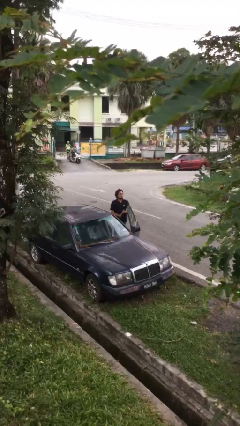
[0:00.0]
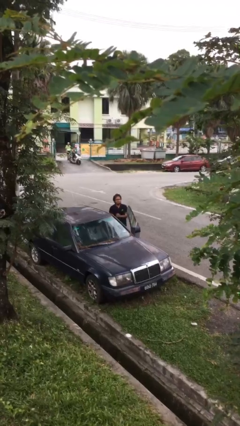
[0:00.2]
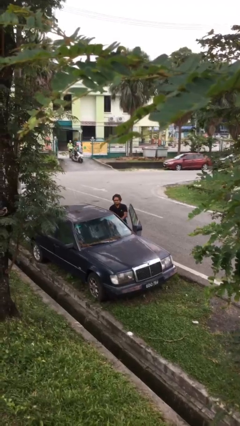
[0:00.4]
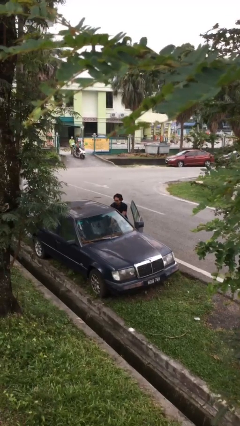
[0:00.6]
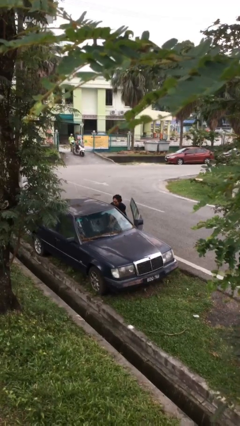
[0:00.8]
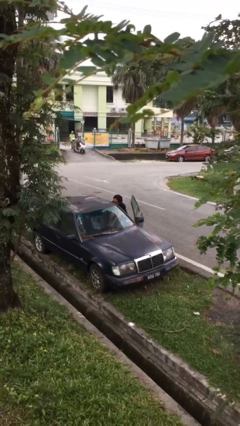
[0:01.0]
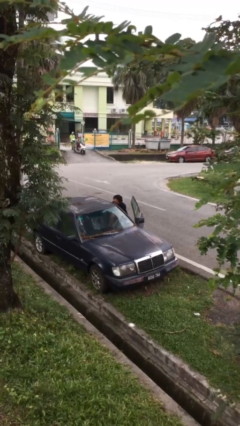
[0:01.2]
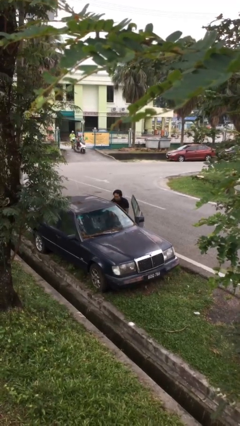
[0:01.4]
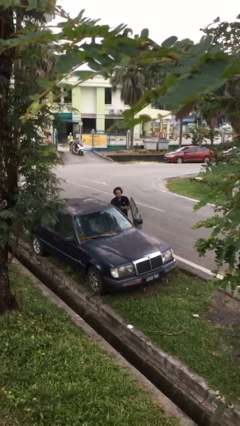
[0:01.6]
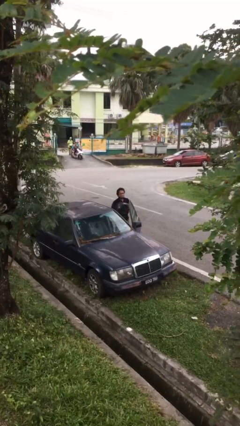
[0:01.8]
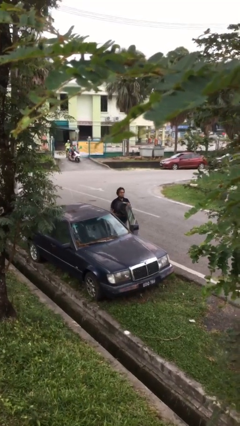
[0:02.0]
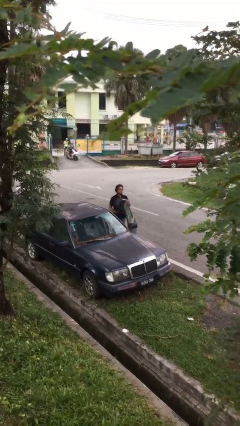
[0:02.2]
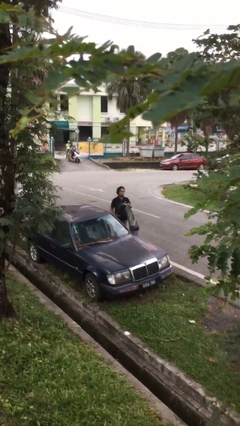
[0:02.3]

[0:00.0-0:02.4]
person unloads car

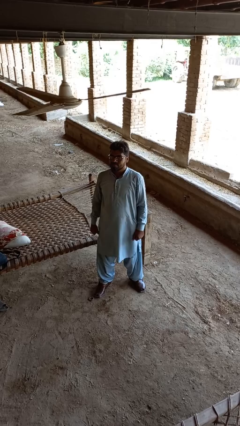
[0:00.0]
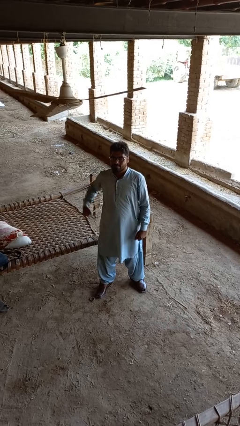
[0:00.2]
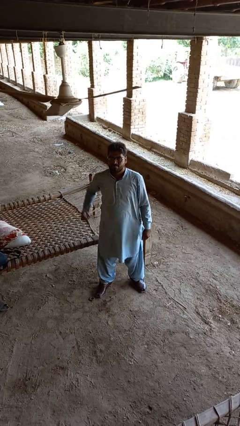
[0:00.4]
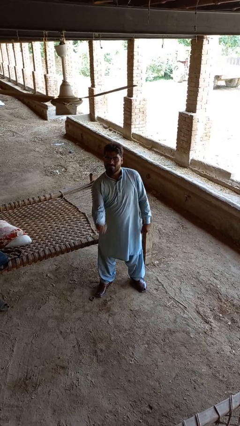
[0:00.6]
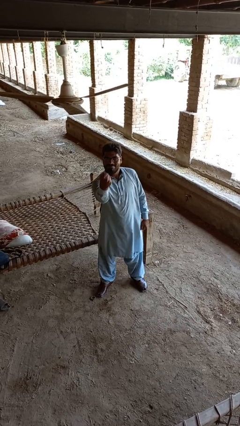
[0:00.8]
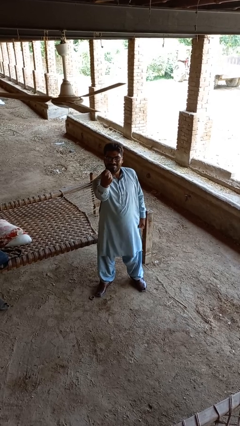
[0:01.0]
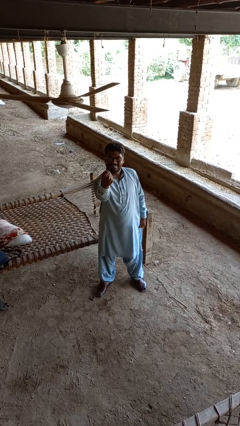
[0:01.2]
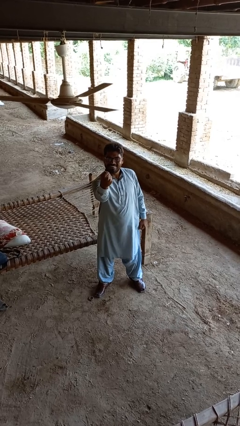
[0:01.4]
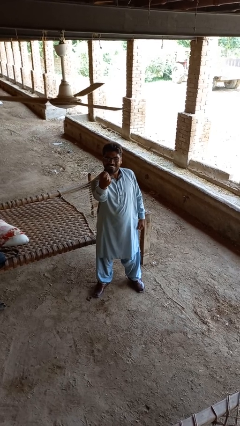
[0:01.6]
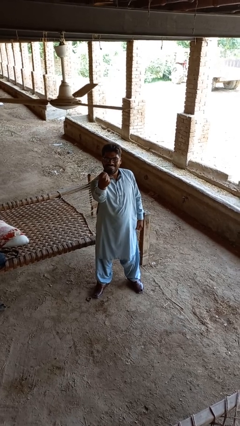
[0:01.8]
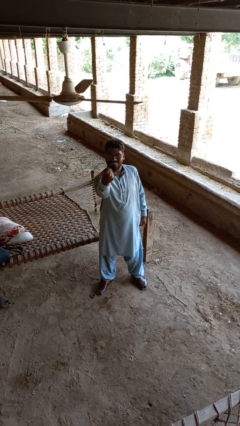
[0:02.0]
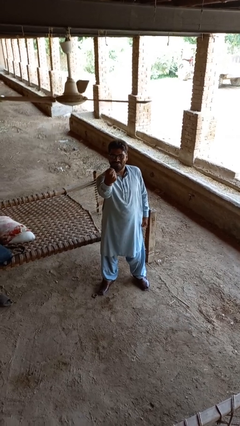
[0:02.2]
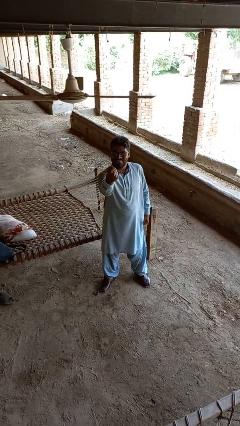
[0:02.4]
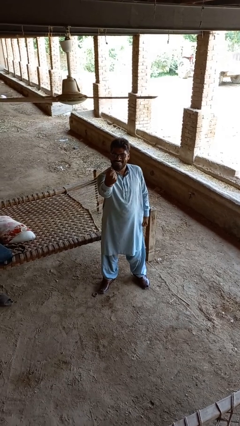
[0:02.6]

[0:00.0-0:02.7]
person punches

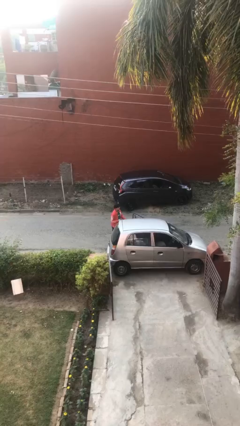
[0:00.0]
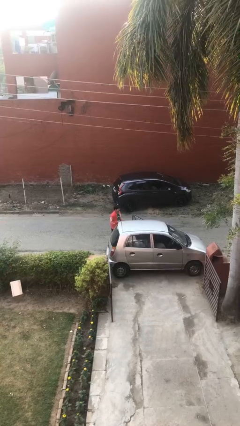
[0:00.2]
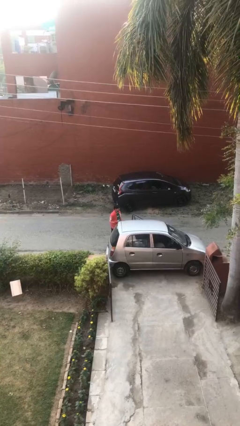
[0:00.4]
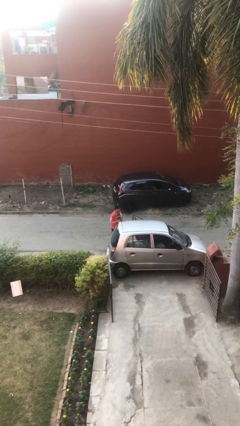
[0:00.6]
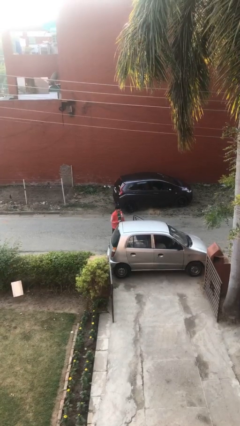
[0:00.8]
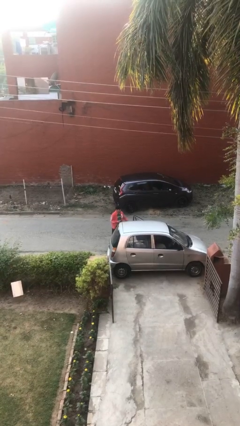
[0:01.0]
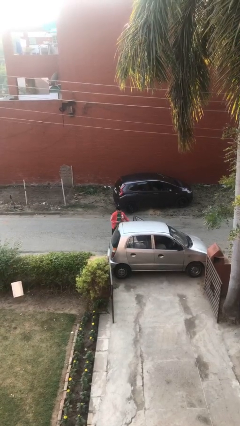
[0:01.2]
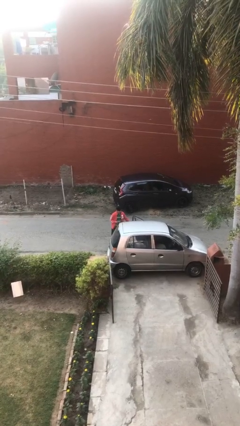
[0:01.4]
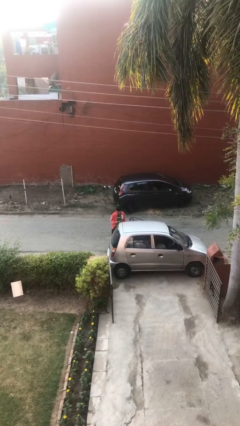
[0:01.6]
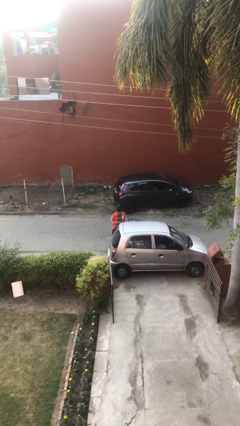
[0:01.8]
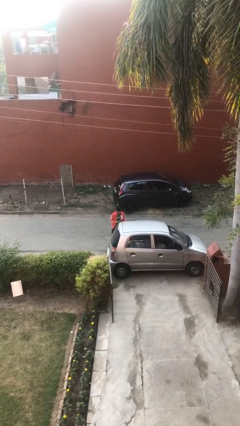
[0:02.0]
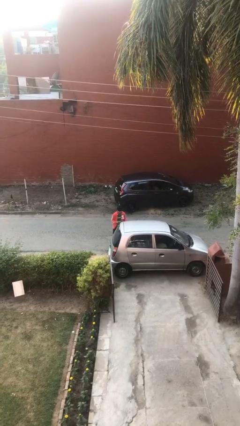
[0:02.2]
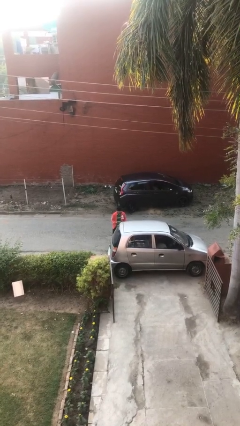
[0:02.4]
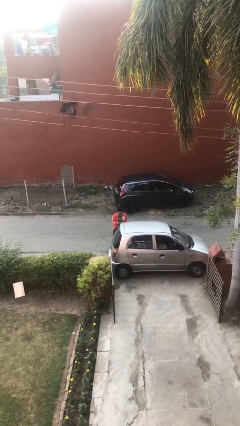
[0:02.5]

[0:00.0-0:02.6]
person closes car door

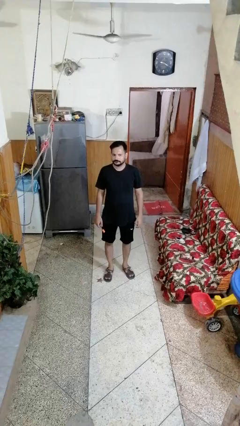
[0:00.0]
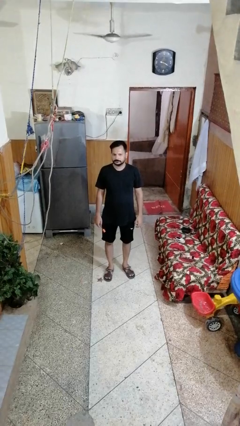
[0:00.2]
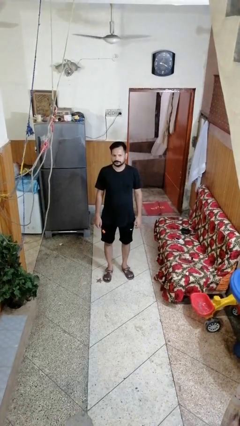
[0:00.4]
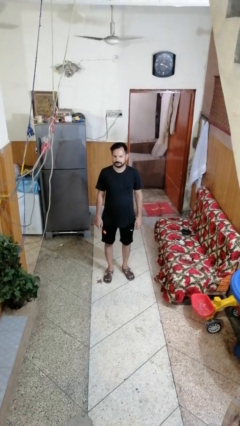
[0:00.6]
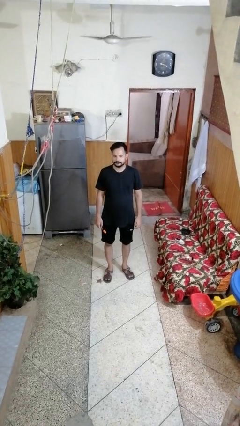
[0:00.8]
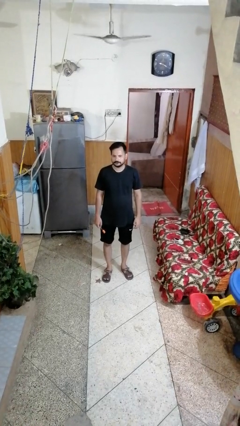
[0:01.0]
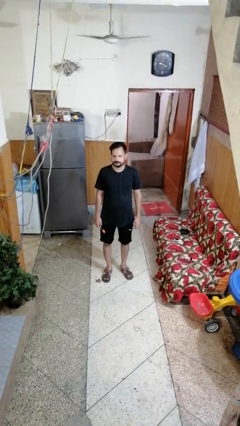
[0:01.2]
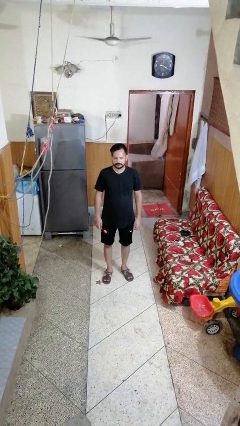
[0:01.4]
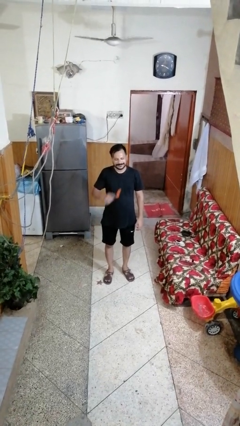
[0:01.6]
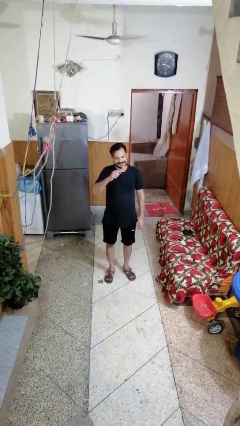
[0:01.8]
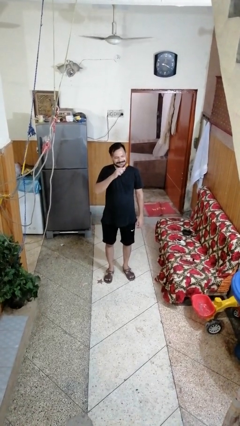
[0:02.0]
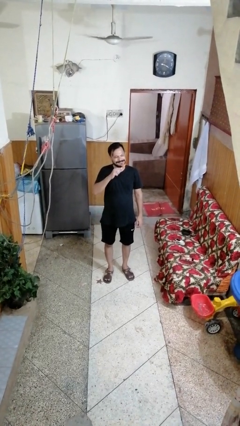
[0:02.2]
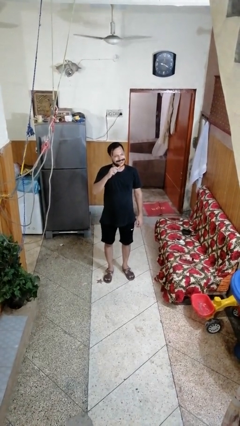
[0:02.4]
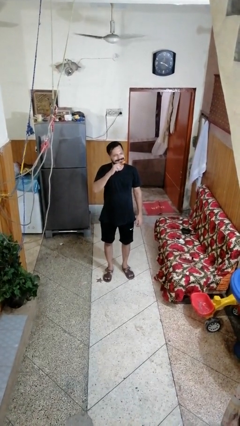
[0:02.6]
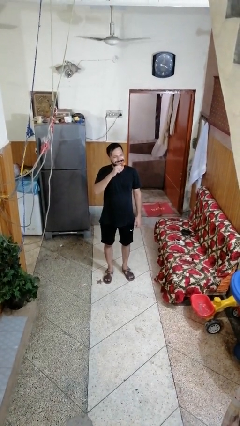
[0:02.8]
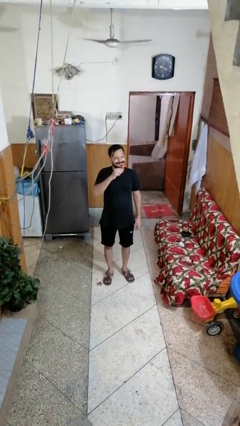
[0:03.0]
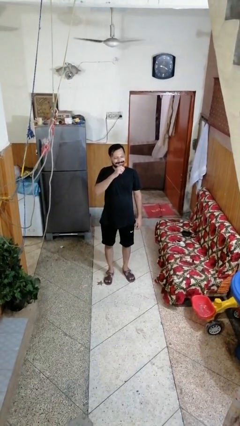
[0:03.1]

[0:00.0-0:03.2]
person brushes teeth

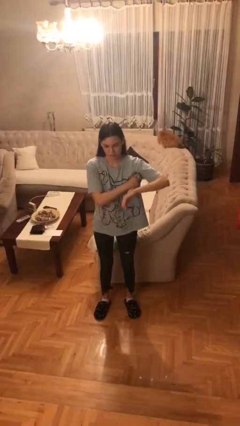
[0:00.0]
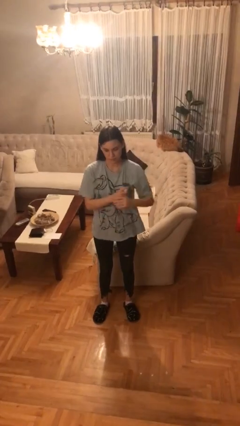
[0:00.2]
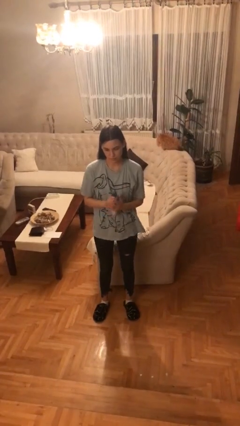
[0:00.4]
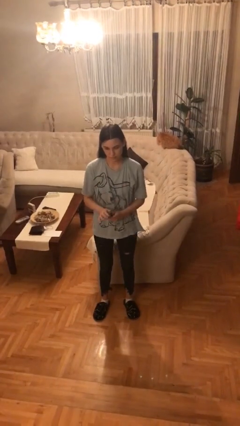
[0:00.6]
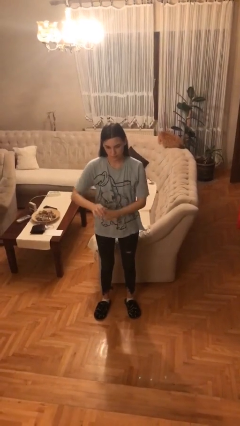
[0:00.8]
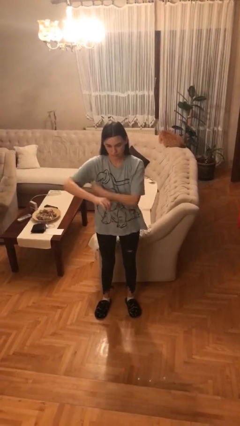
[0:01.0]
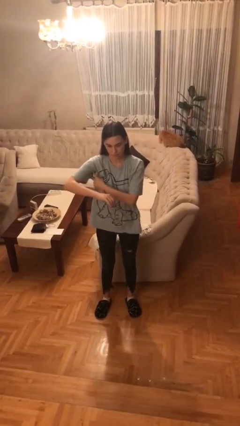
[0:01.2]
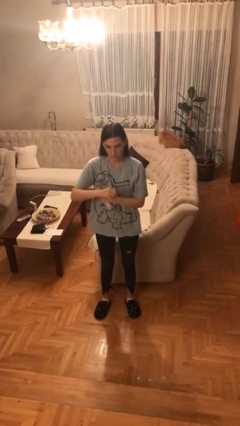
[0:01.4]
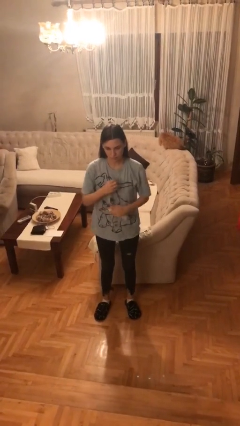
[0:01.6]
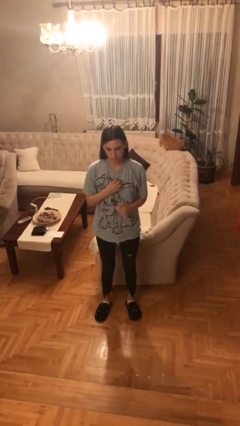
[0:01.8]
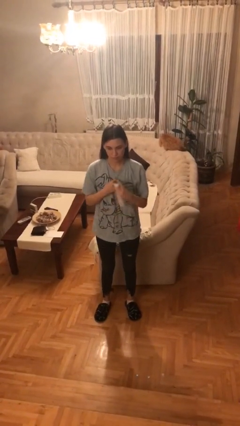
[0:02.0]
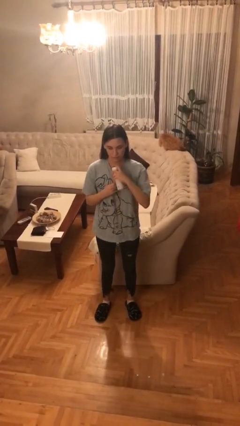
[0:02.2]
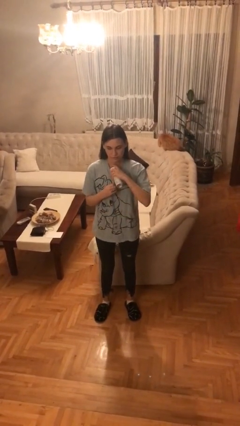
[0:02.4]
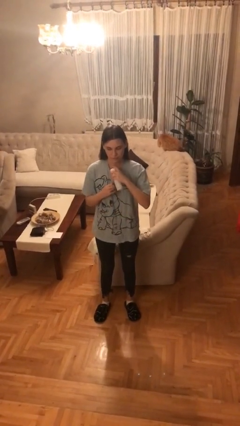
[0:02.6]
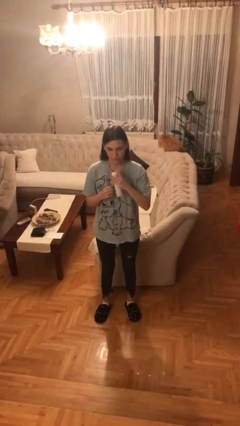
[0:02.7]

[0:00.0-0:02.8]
person applies deodorant

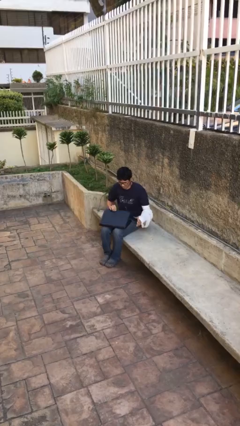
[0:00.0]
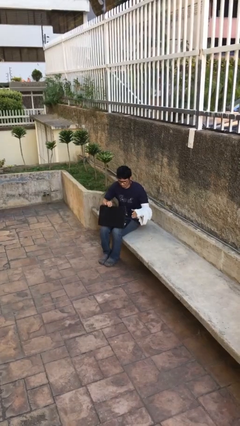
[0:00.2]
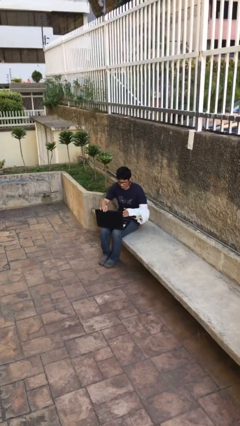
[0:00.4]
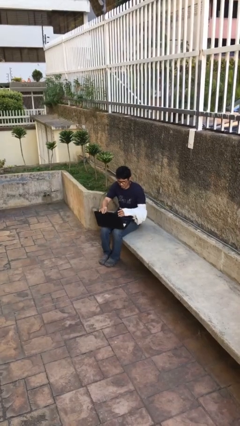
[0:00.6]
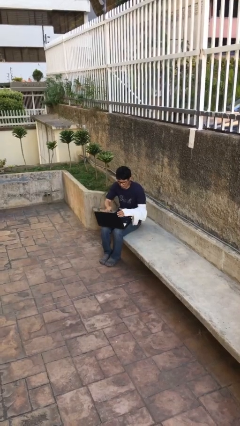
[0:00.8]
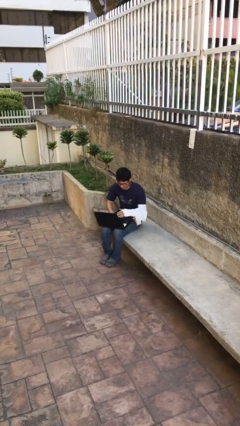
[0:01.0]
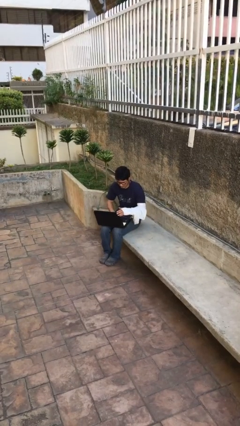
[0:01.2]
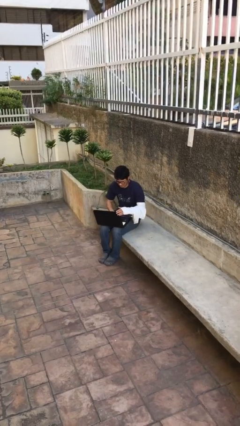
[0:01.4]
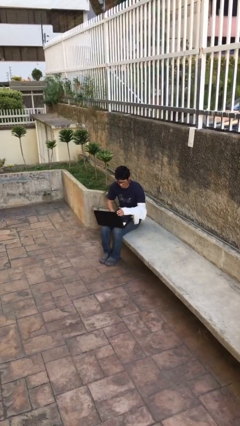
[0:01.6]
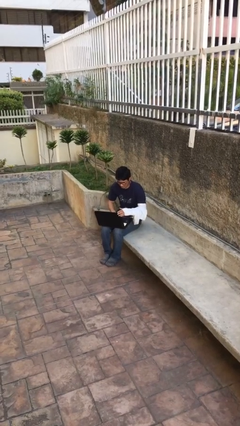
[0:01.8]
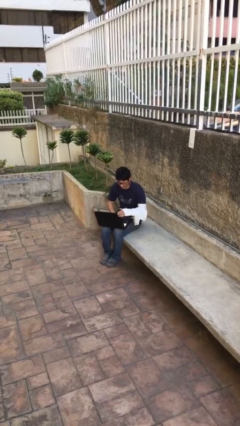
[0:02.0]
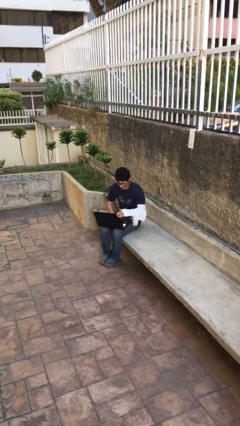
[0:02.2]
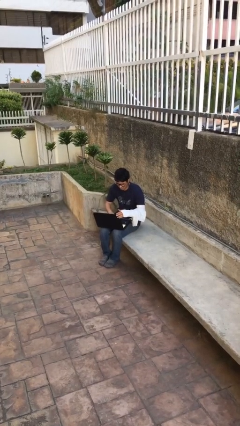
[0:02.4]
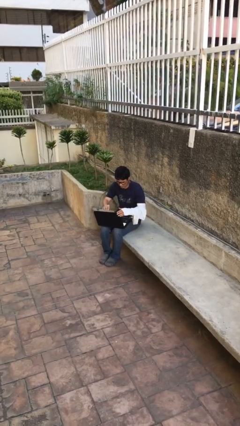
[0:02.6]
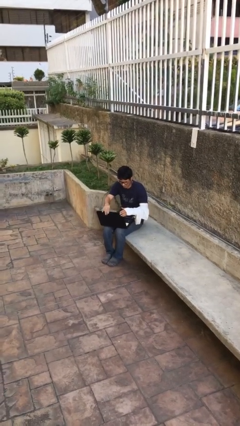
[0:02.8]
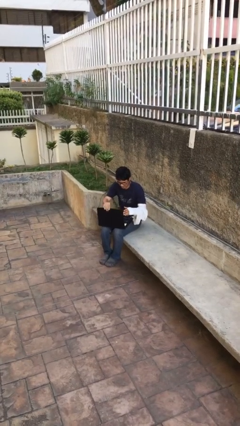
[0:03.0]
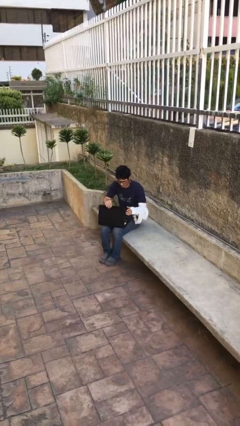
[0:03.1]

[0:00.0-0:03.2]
person interacts with laptop

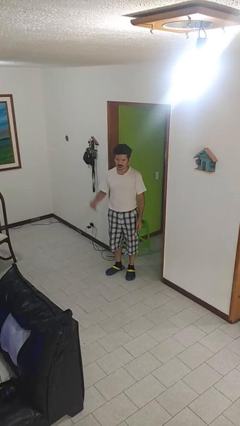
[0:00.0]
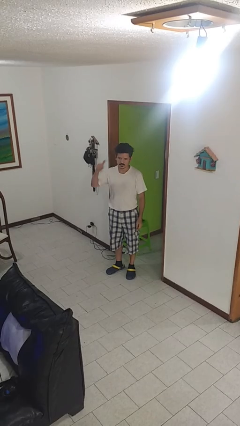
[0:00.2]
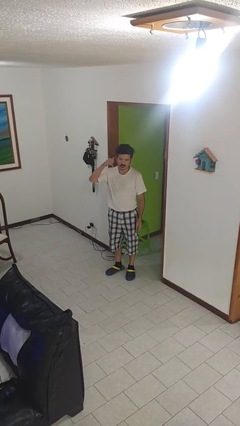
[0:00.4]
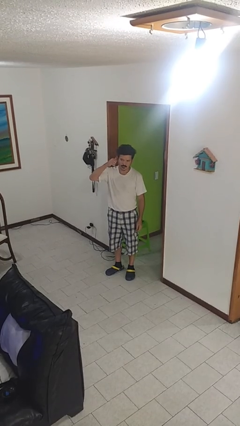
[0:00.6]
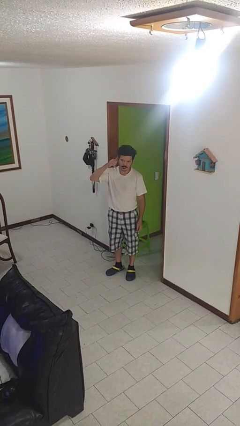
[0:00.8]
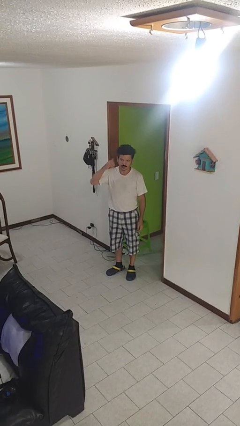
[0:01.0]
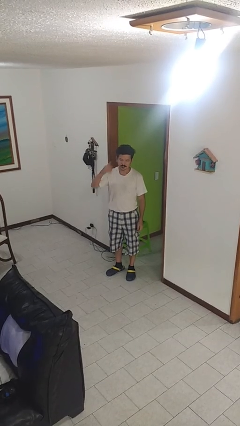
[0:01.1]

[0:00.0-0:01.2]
person gestures call me
